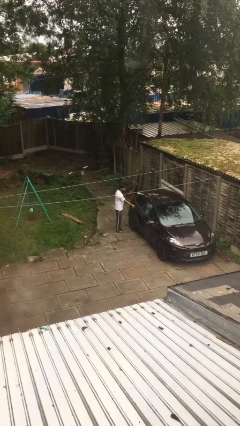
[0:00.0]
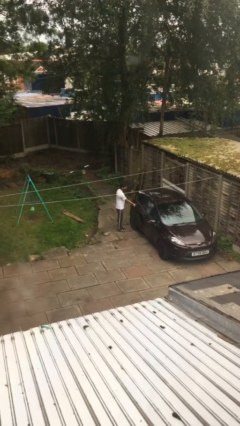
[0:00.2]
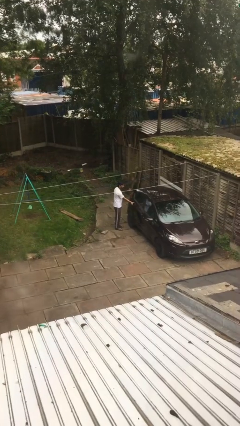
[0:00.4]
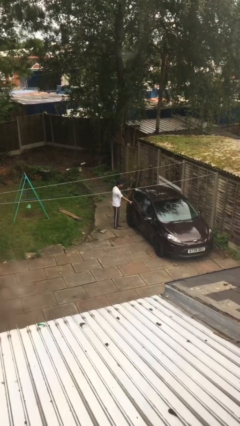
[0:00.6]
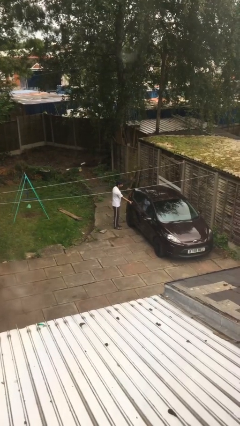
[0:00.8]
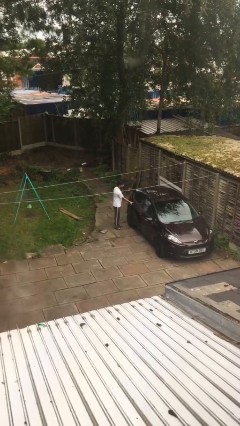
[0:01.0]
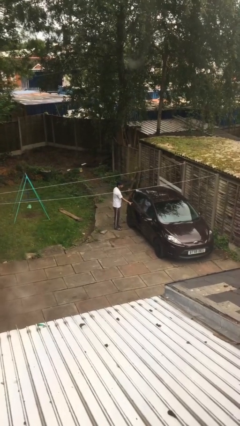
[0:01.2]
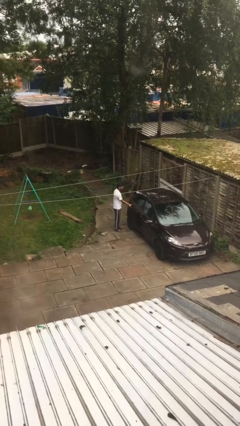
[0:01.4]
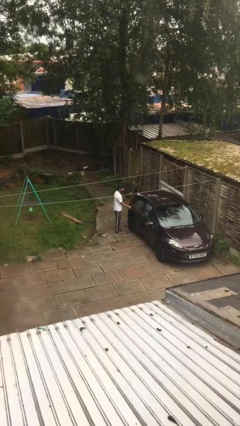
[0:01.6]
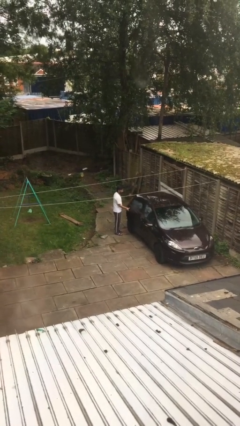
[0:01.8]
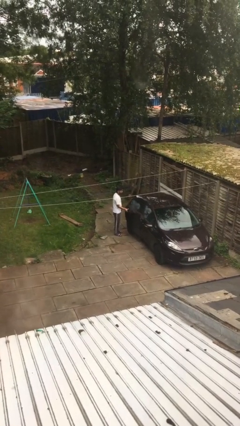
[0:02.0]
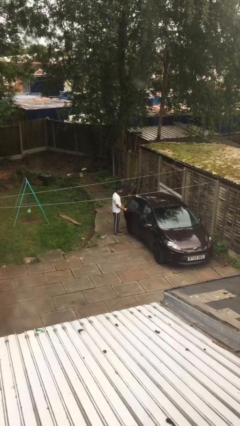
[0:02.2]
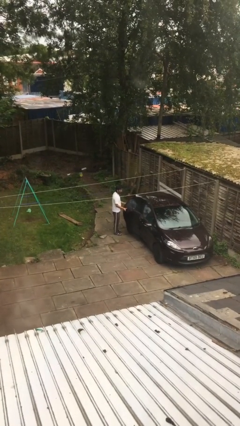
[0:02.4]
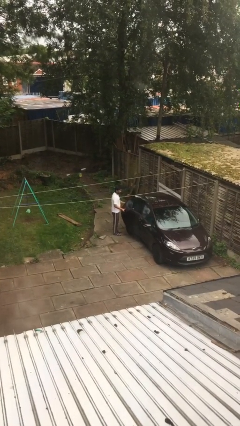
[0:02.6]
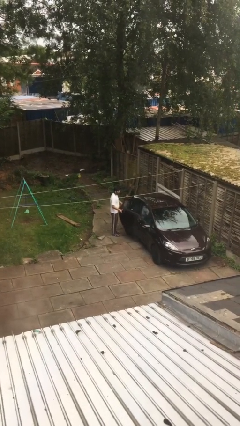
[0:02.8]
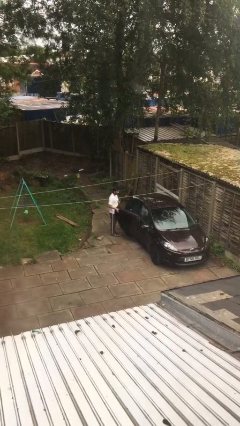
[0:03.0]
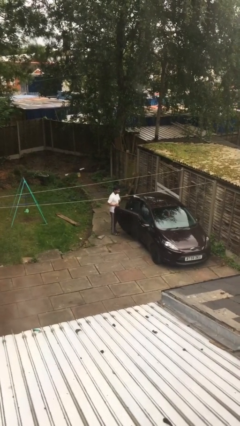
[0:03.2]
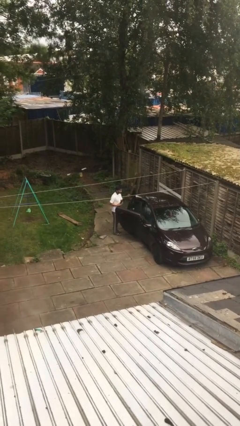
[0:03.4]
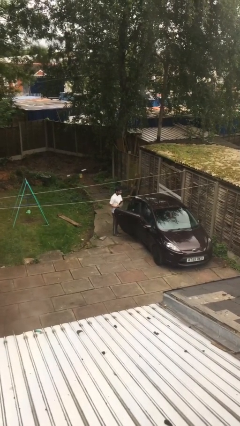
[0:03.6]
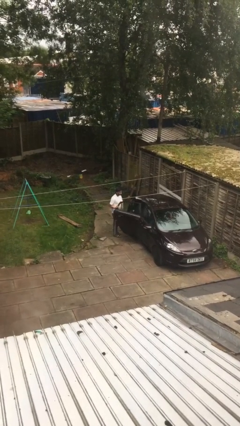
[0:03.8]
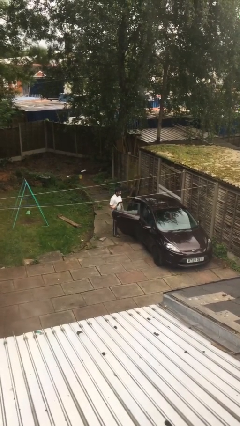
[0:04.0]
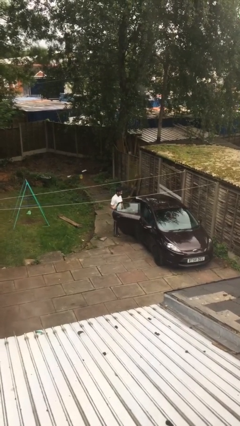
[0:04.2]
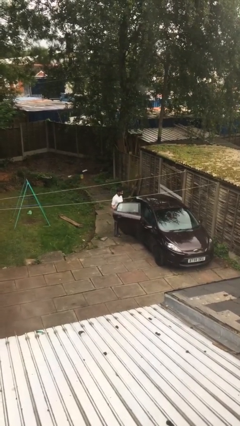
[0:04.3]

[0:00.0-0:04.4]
person opens car door

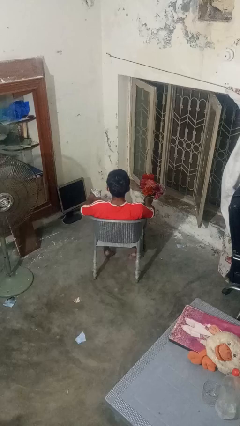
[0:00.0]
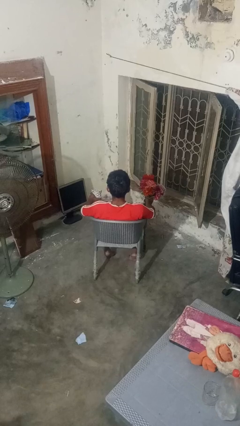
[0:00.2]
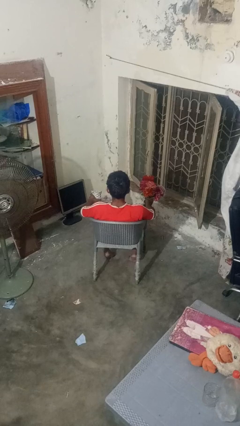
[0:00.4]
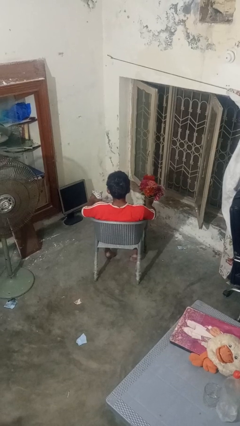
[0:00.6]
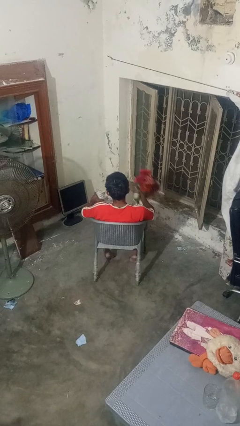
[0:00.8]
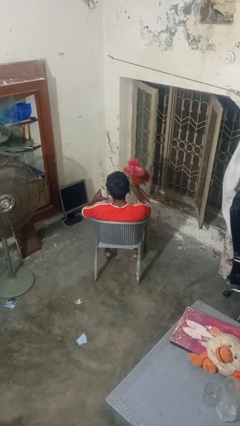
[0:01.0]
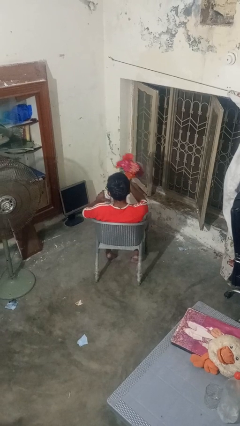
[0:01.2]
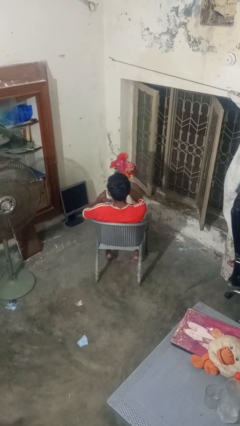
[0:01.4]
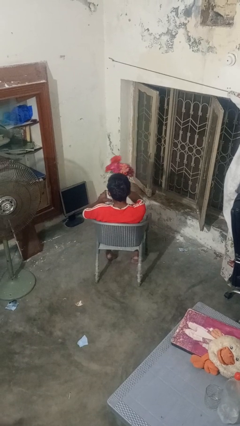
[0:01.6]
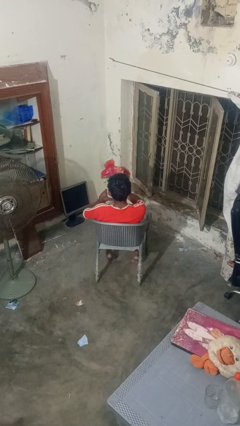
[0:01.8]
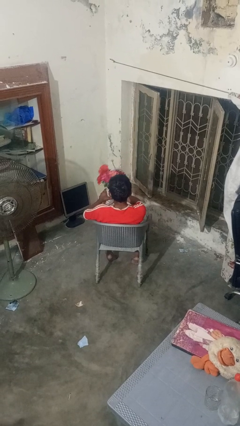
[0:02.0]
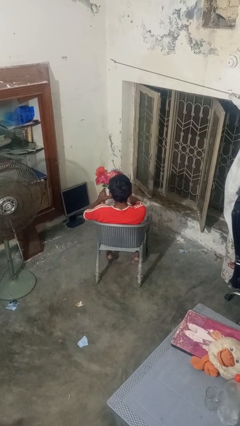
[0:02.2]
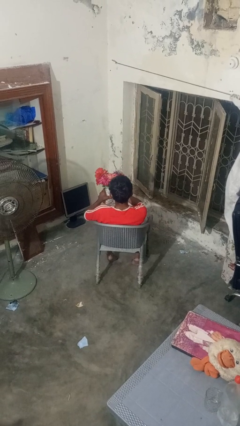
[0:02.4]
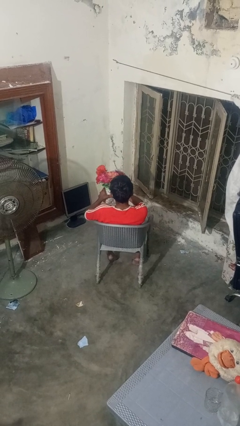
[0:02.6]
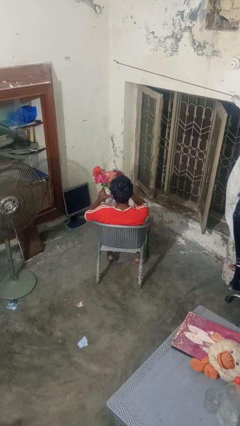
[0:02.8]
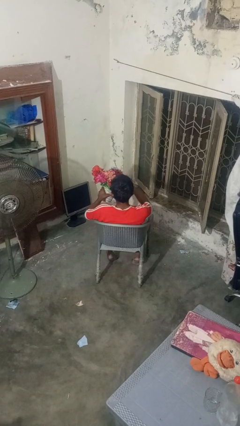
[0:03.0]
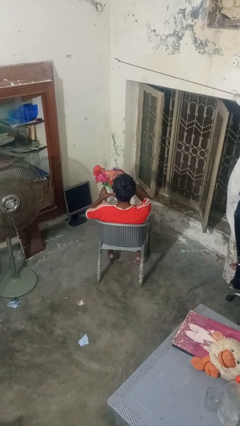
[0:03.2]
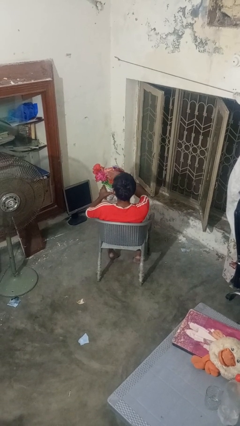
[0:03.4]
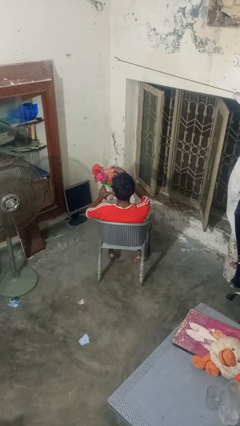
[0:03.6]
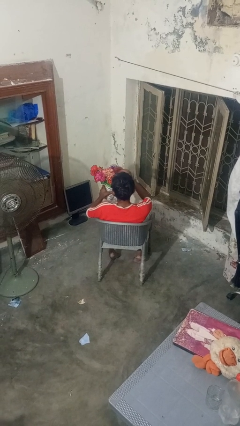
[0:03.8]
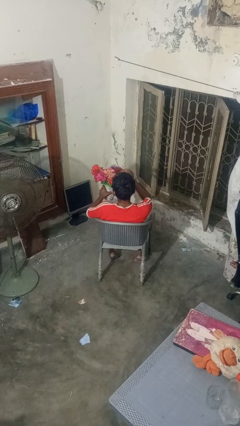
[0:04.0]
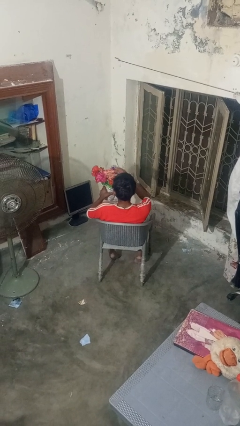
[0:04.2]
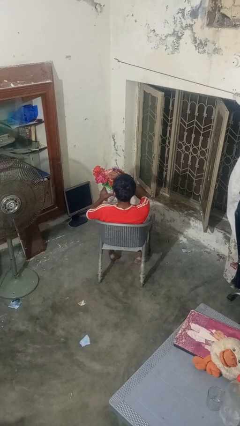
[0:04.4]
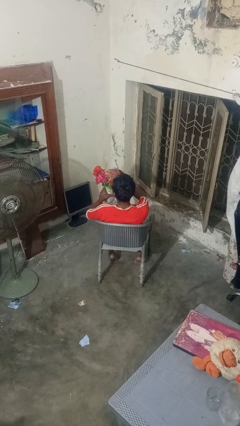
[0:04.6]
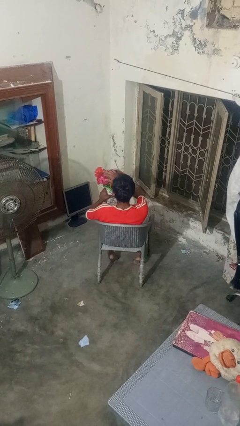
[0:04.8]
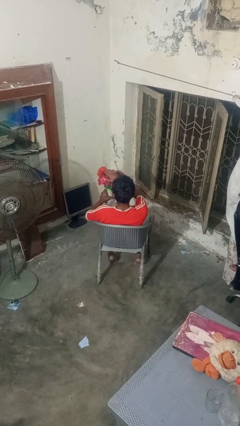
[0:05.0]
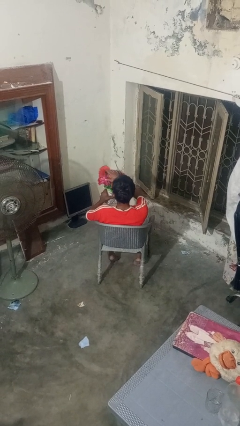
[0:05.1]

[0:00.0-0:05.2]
person arranges flowers in vase

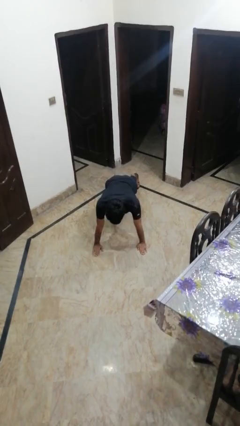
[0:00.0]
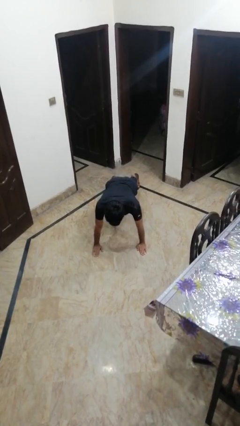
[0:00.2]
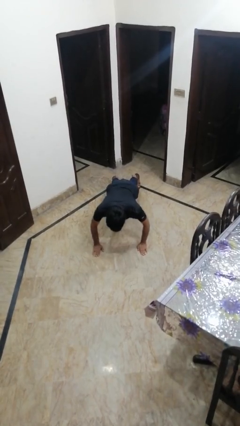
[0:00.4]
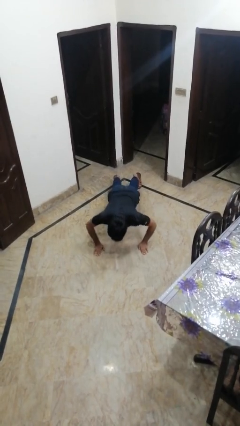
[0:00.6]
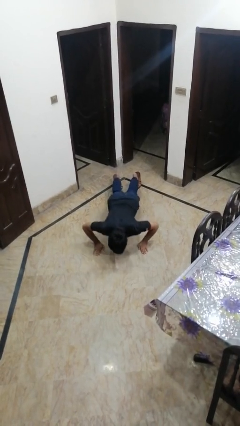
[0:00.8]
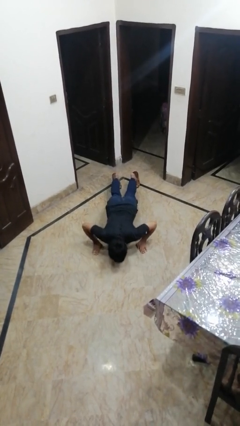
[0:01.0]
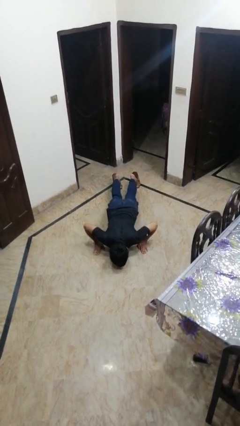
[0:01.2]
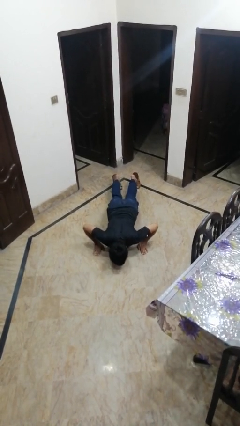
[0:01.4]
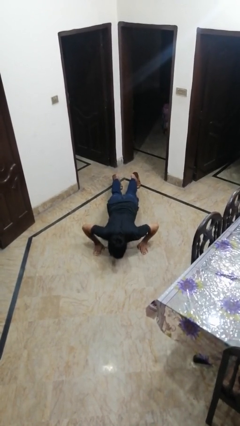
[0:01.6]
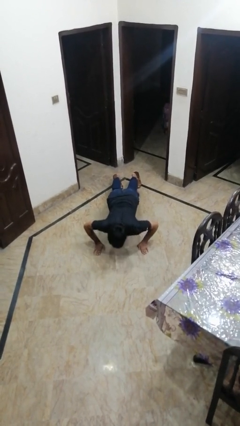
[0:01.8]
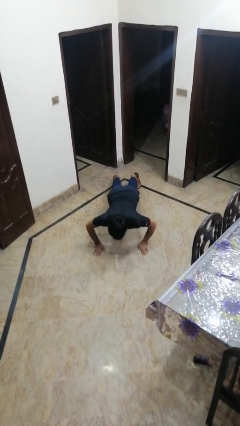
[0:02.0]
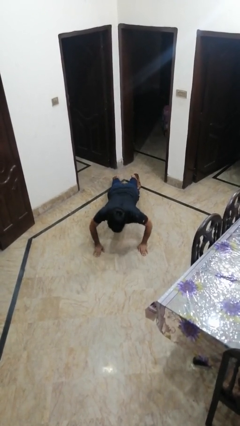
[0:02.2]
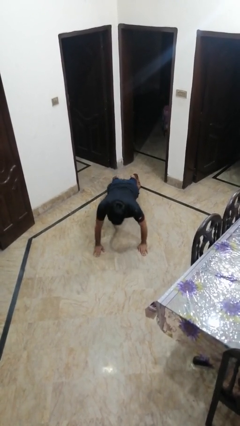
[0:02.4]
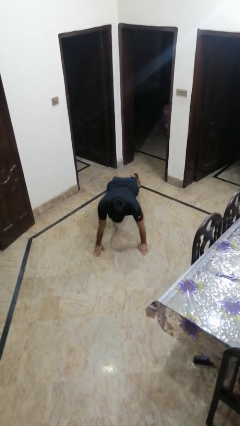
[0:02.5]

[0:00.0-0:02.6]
person exercises with pushup

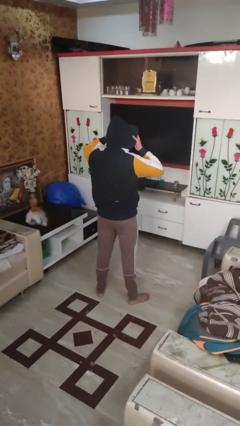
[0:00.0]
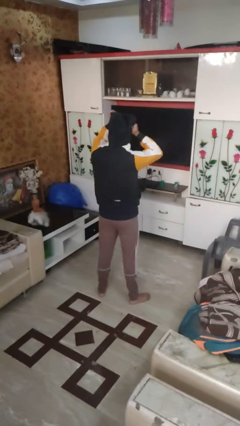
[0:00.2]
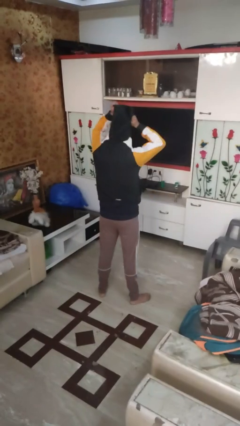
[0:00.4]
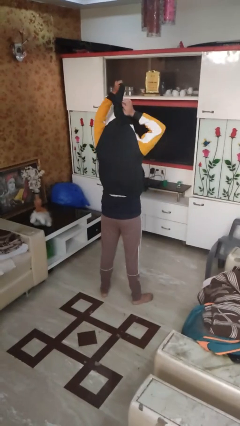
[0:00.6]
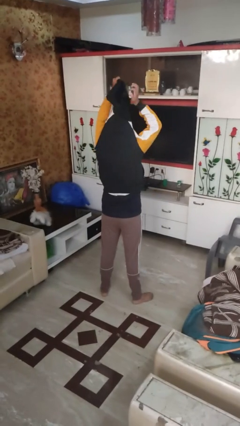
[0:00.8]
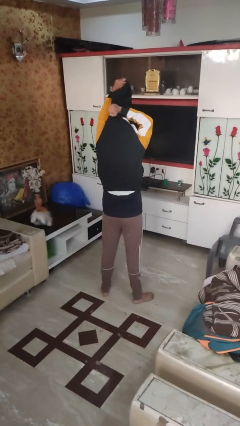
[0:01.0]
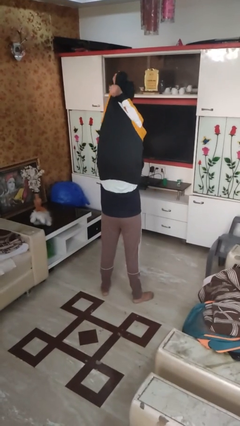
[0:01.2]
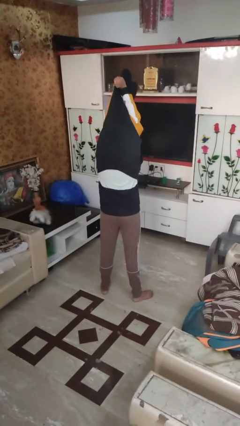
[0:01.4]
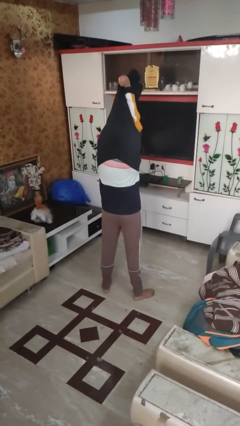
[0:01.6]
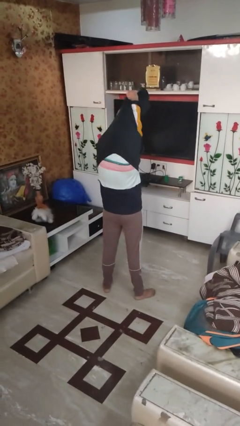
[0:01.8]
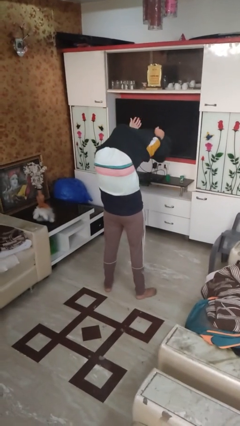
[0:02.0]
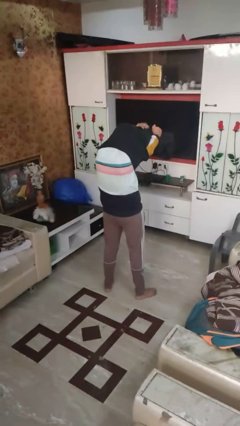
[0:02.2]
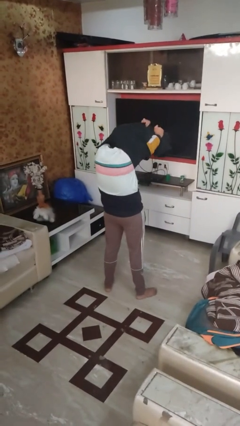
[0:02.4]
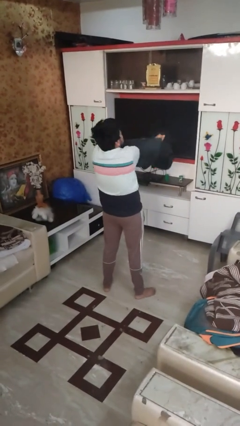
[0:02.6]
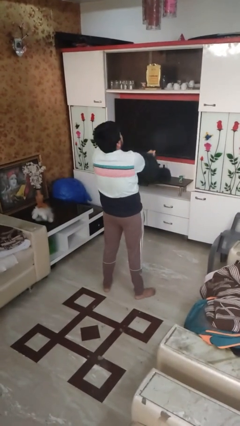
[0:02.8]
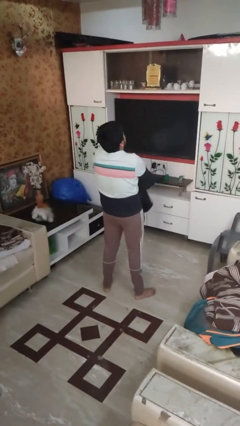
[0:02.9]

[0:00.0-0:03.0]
person takes off hoodie

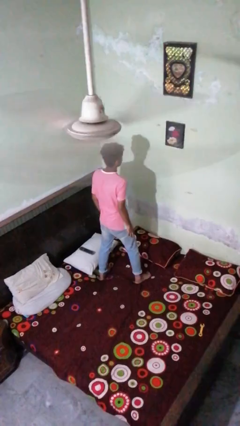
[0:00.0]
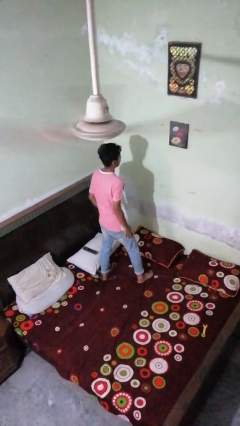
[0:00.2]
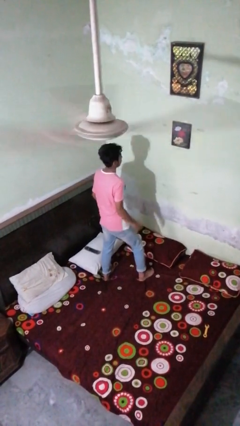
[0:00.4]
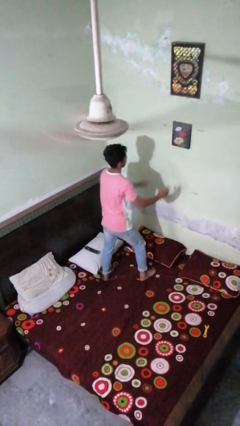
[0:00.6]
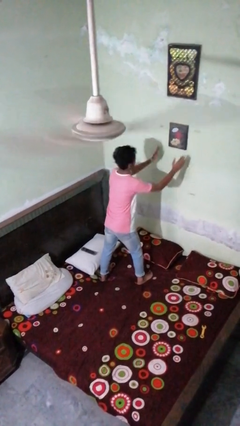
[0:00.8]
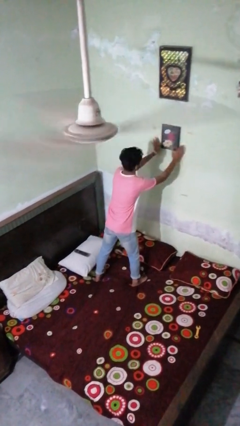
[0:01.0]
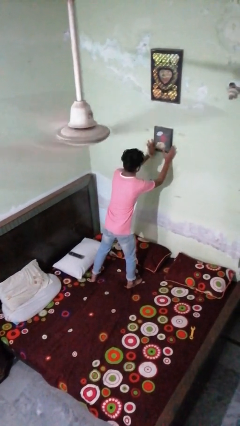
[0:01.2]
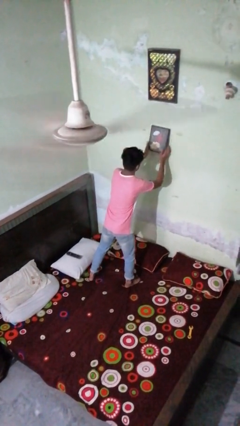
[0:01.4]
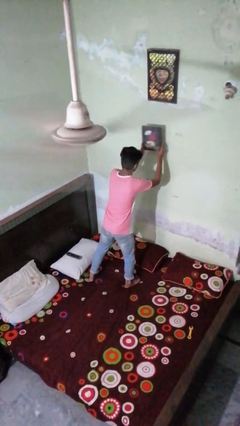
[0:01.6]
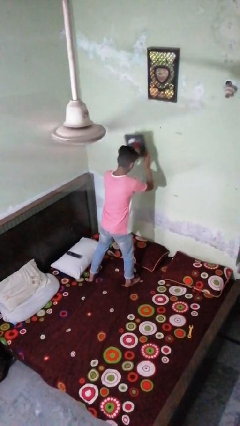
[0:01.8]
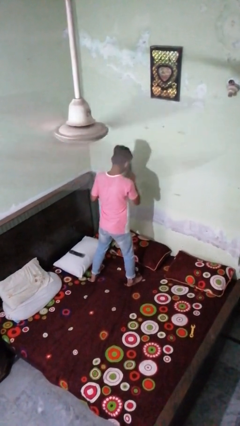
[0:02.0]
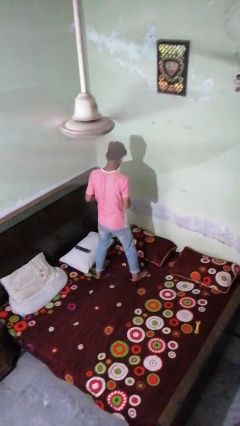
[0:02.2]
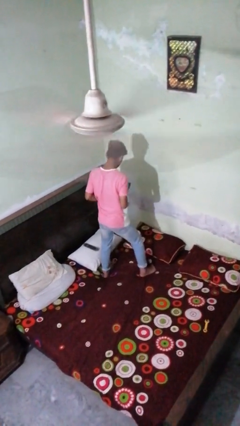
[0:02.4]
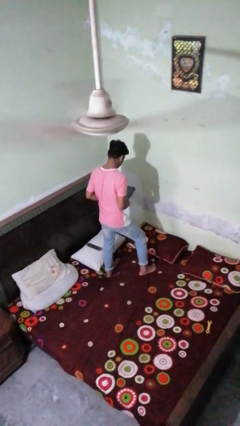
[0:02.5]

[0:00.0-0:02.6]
person takes down picture frame
